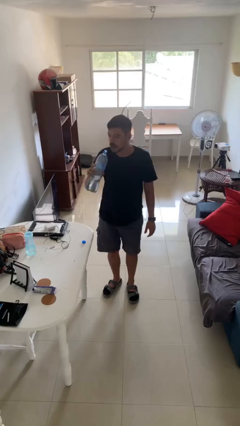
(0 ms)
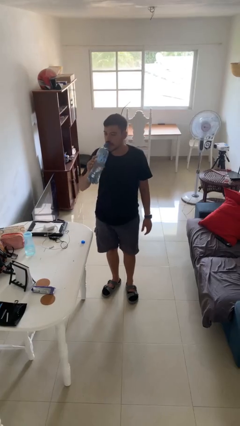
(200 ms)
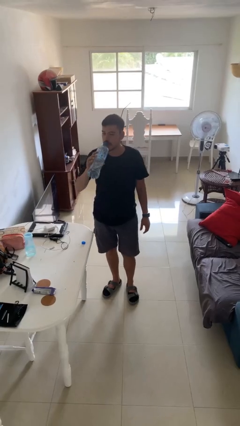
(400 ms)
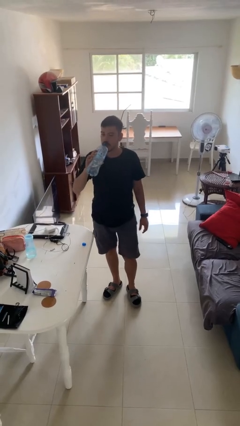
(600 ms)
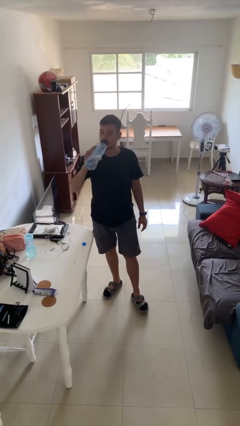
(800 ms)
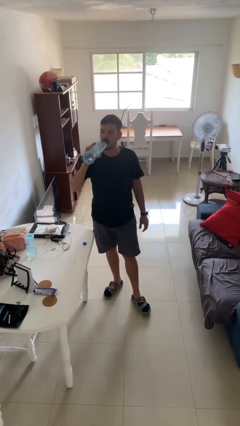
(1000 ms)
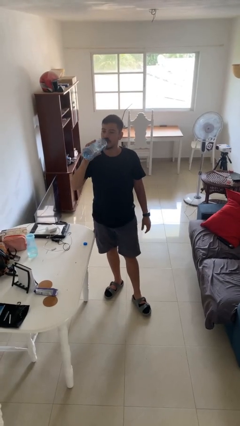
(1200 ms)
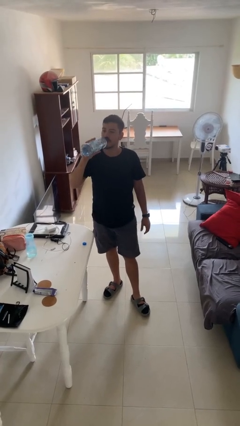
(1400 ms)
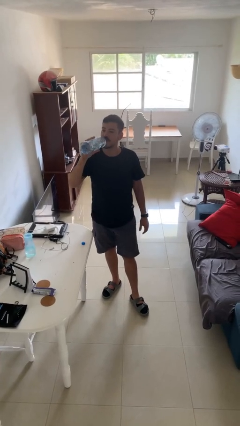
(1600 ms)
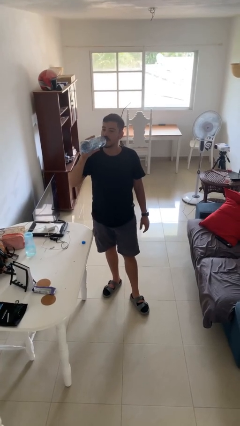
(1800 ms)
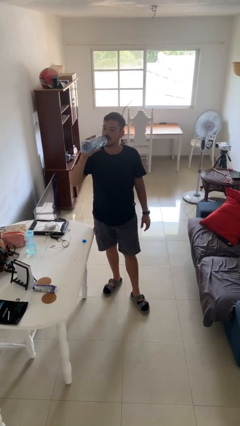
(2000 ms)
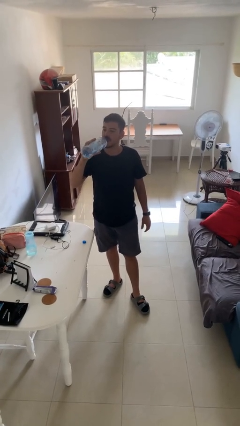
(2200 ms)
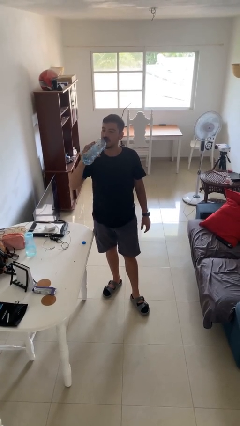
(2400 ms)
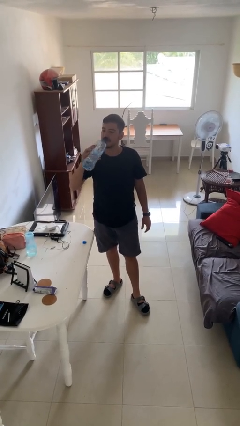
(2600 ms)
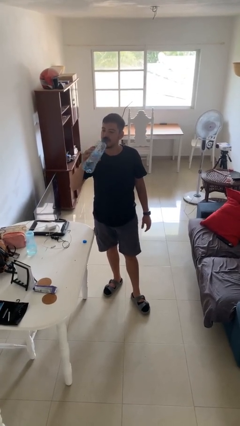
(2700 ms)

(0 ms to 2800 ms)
person drinks from bottle

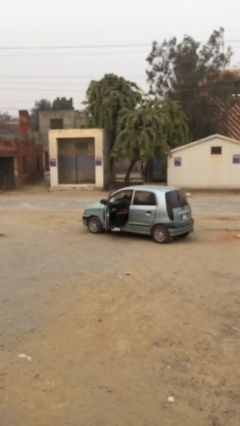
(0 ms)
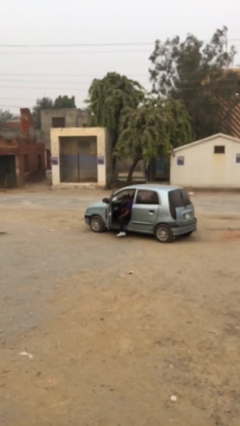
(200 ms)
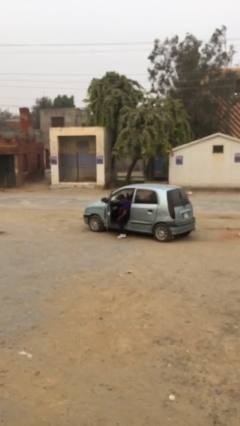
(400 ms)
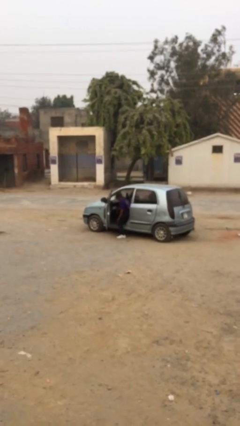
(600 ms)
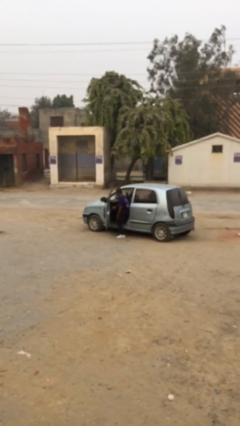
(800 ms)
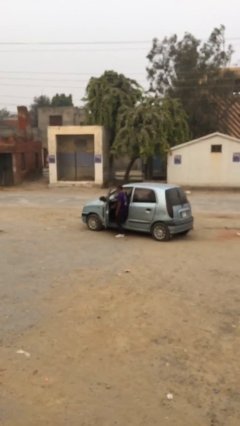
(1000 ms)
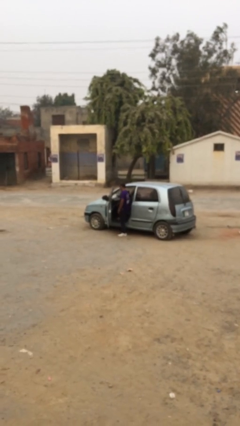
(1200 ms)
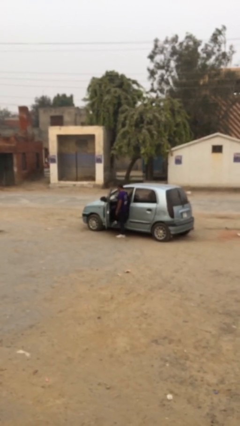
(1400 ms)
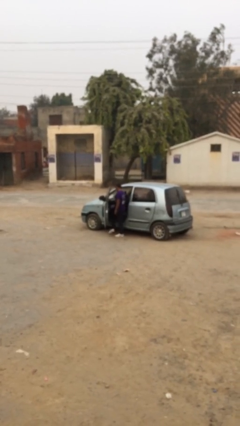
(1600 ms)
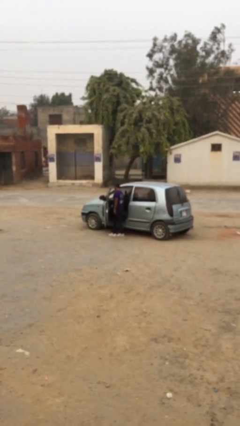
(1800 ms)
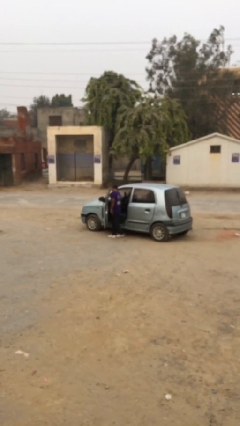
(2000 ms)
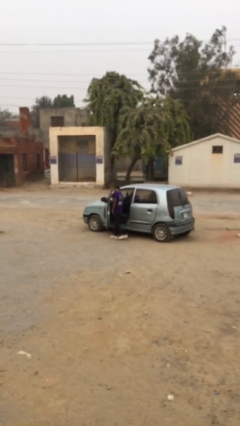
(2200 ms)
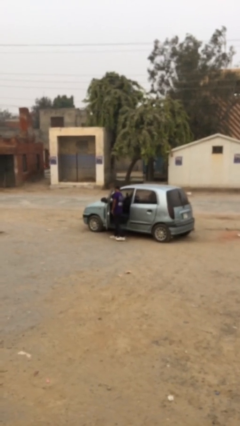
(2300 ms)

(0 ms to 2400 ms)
person exits car

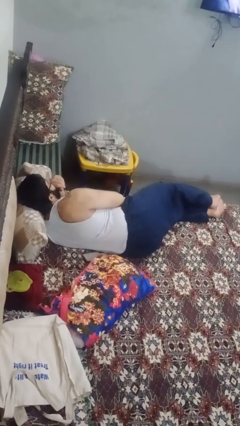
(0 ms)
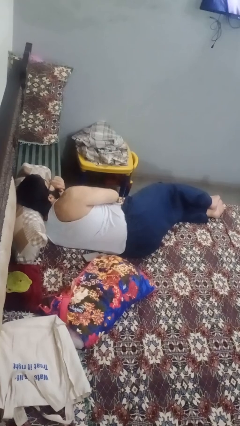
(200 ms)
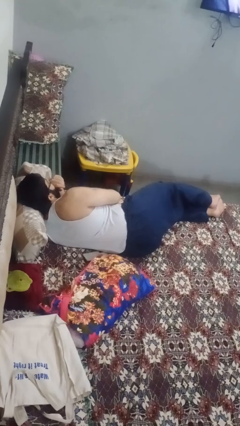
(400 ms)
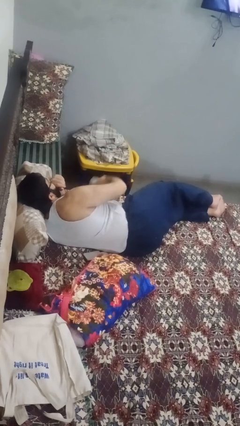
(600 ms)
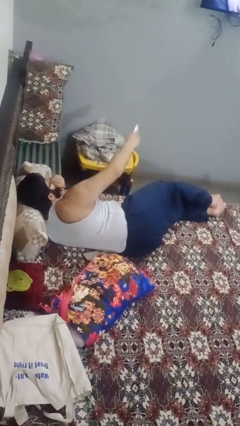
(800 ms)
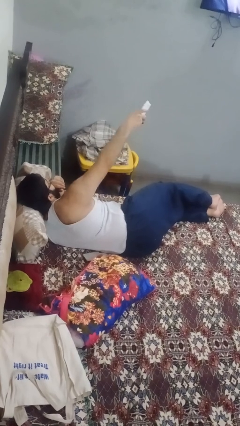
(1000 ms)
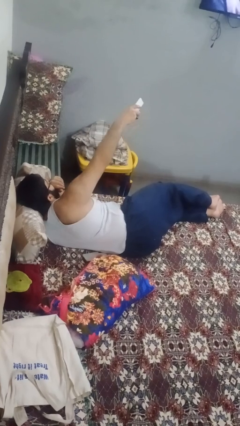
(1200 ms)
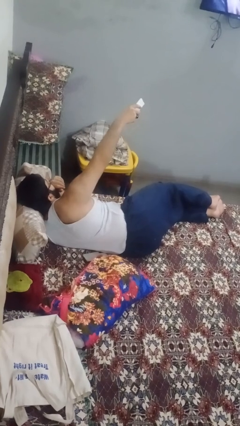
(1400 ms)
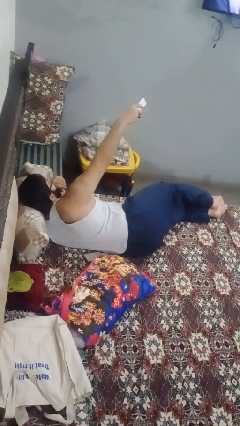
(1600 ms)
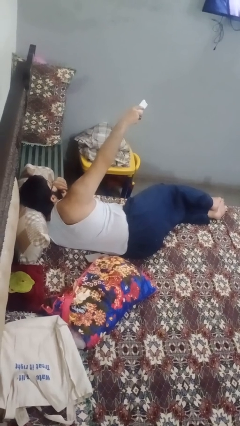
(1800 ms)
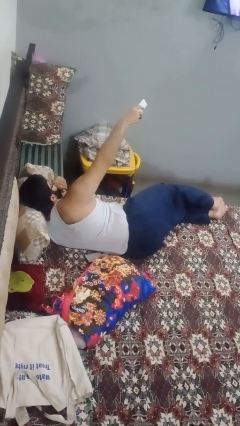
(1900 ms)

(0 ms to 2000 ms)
person uses television remote

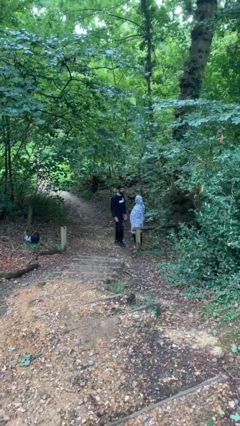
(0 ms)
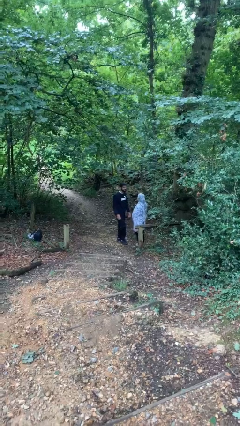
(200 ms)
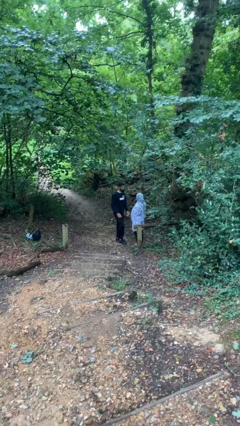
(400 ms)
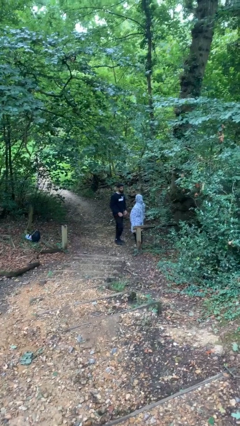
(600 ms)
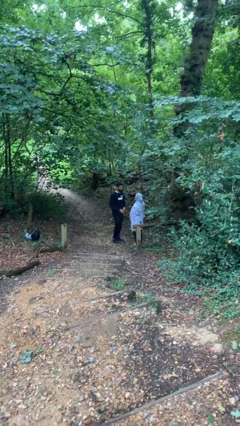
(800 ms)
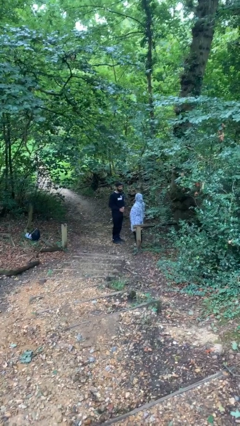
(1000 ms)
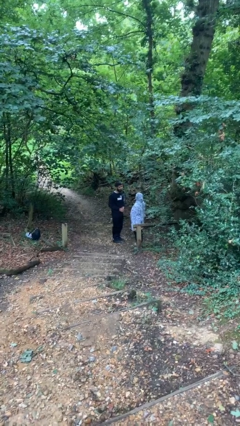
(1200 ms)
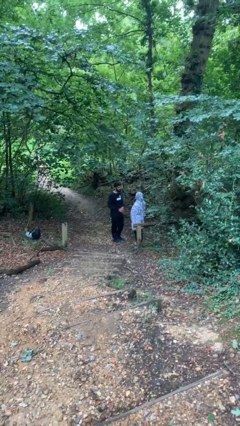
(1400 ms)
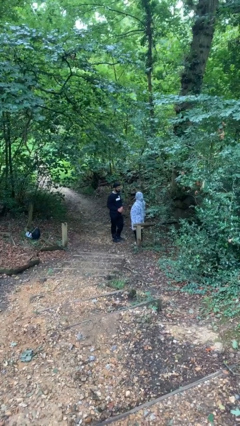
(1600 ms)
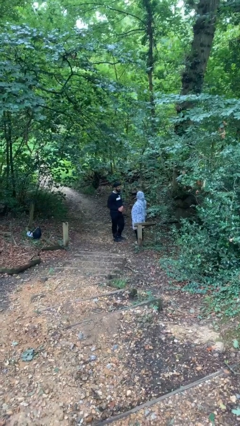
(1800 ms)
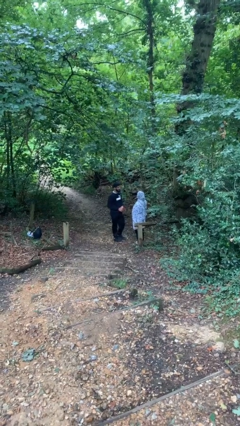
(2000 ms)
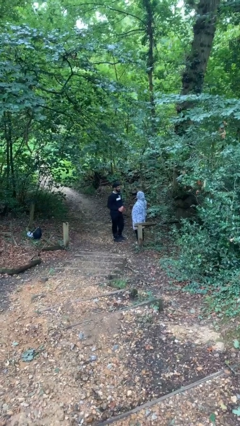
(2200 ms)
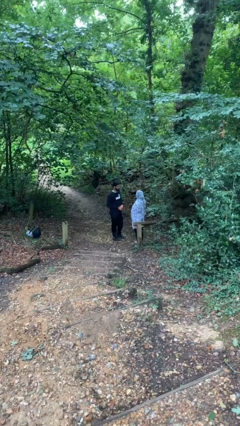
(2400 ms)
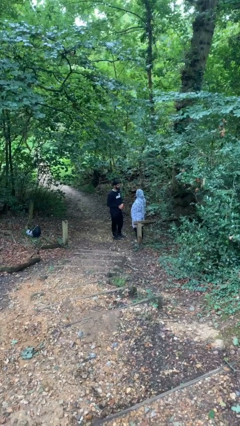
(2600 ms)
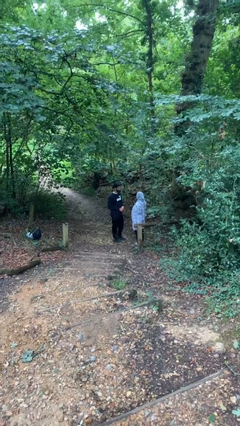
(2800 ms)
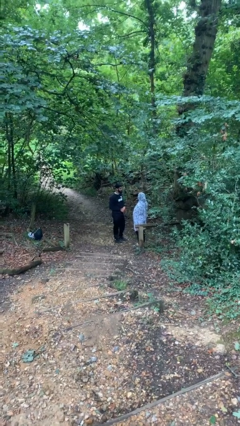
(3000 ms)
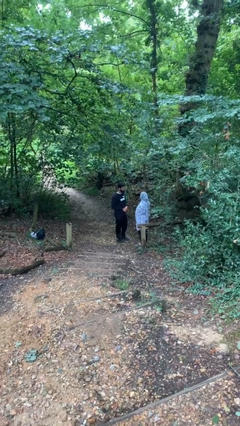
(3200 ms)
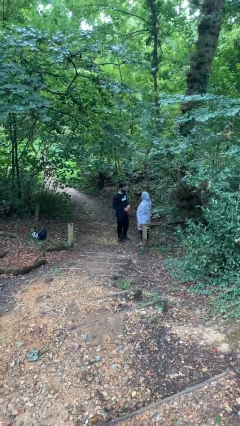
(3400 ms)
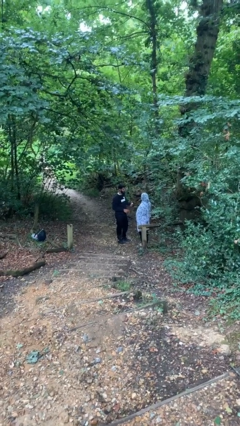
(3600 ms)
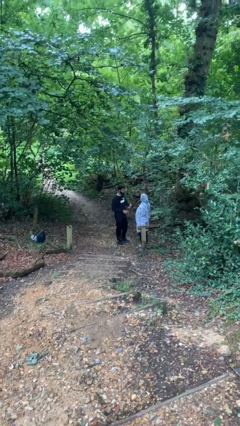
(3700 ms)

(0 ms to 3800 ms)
person talks to person

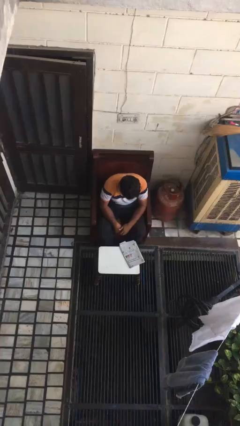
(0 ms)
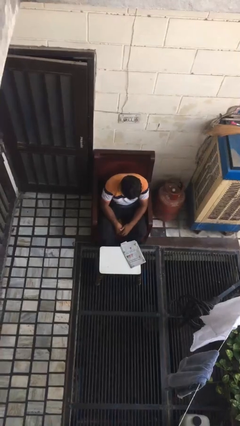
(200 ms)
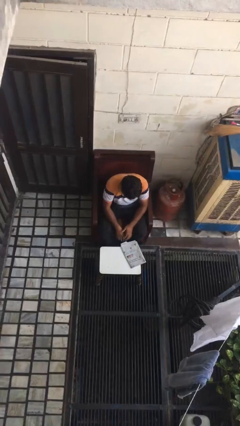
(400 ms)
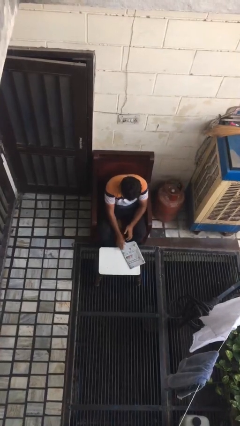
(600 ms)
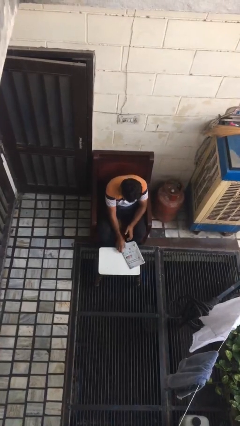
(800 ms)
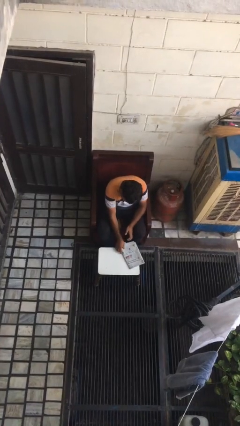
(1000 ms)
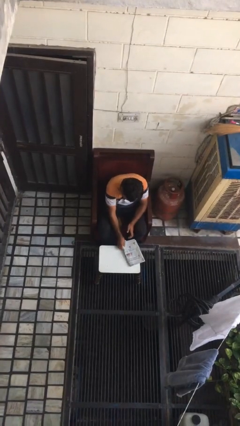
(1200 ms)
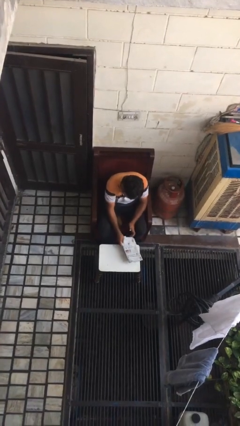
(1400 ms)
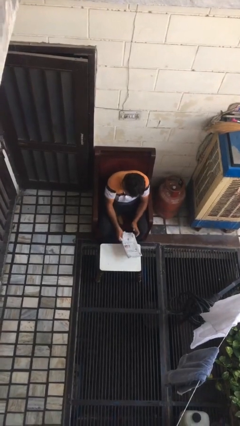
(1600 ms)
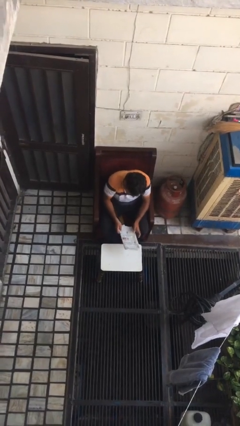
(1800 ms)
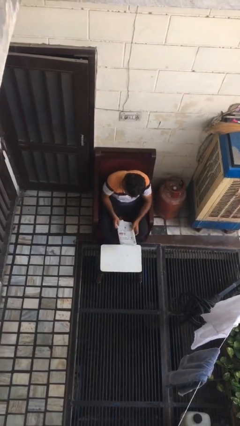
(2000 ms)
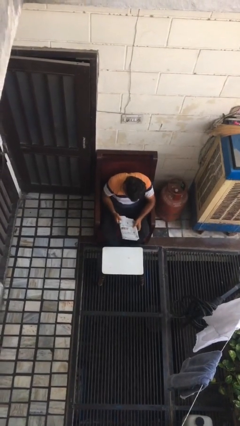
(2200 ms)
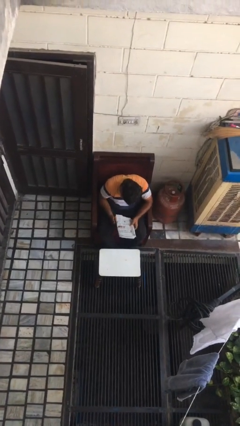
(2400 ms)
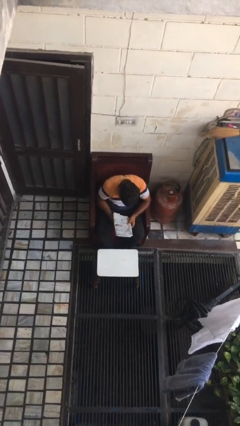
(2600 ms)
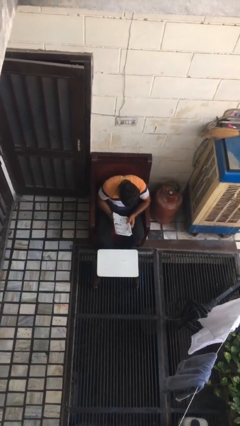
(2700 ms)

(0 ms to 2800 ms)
person picks up object from table

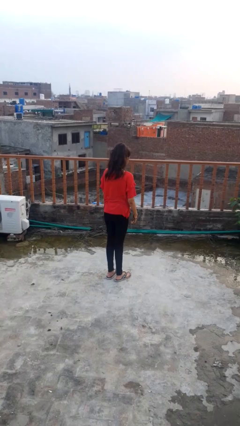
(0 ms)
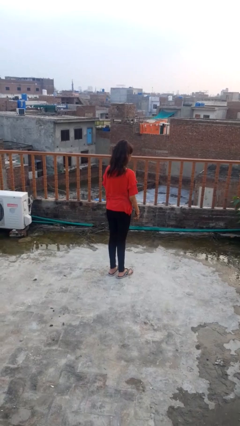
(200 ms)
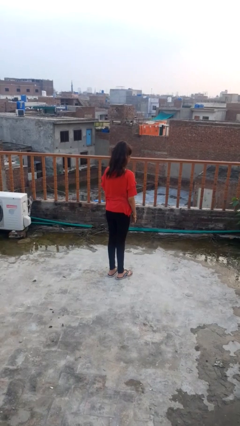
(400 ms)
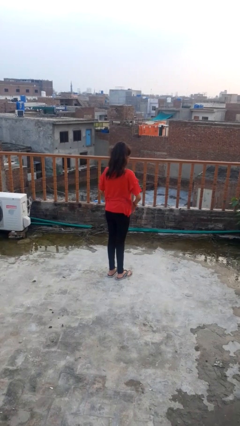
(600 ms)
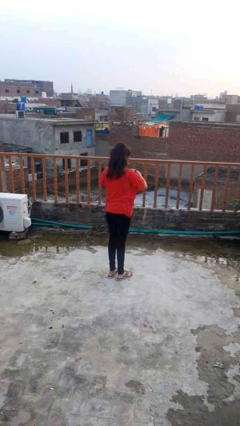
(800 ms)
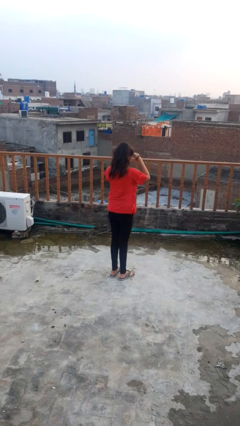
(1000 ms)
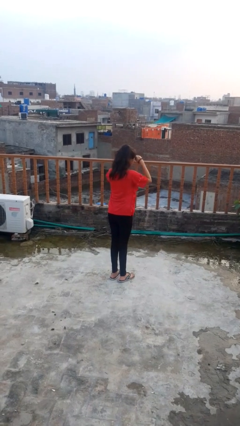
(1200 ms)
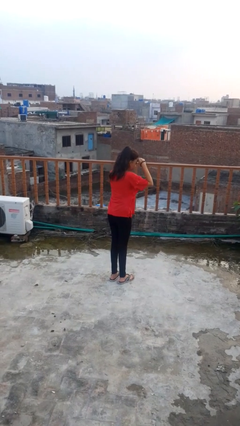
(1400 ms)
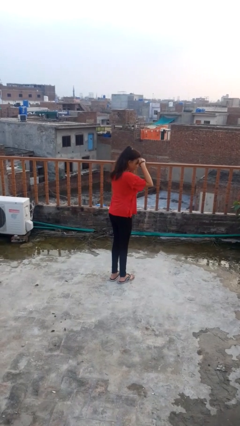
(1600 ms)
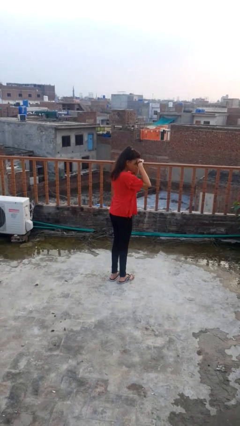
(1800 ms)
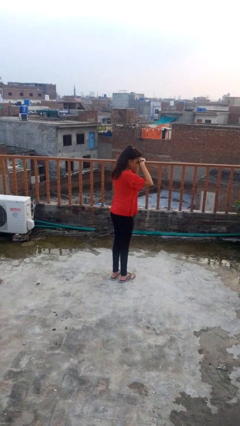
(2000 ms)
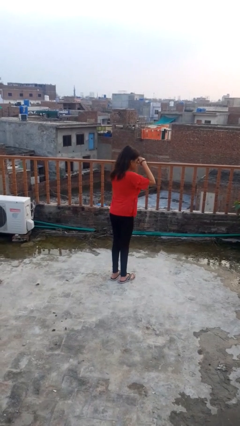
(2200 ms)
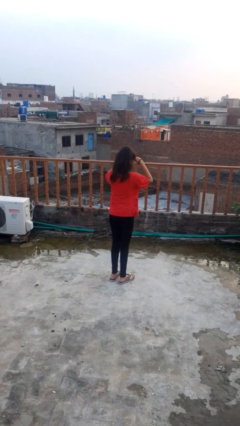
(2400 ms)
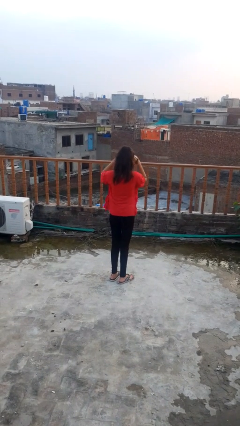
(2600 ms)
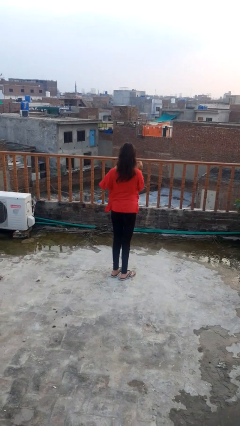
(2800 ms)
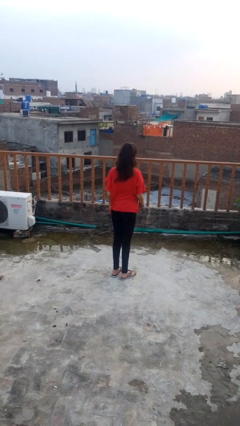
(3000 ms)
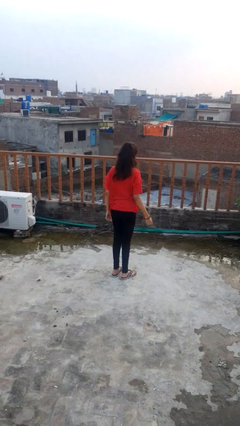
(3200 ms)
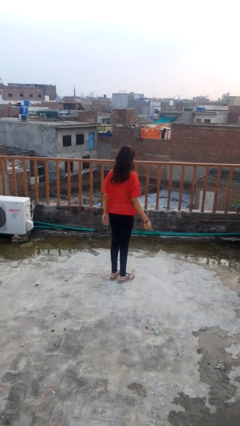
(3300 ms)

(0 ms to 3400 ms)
person shades eyes

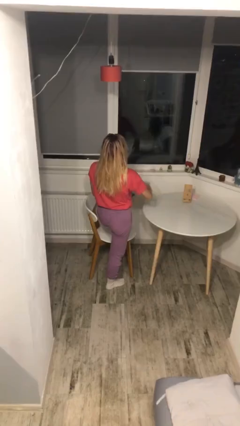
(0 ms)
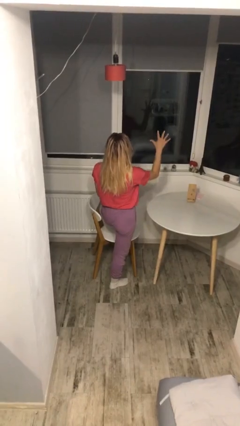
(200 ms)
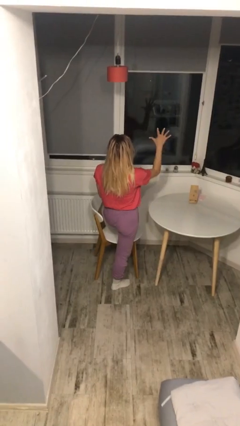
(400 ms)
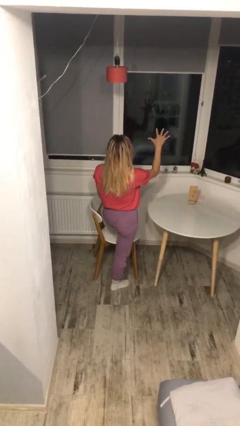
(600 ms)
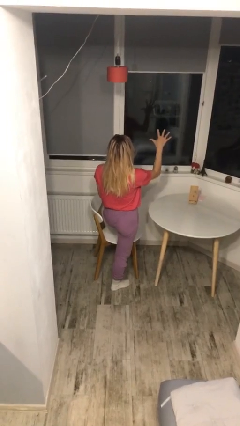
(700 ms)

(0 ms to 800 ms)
person gestures number five
